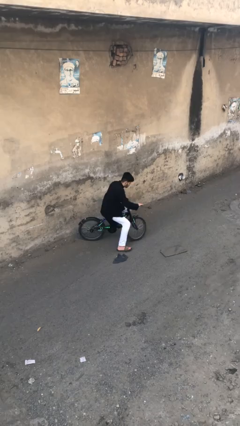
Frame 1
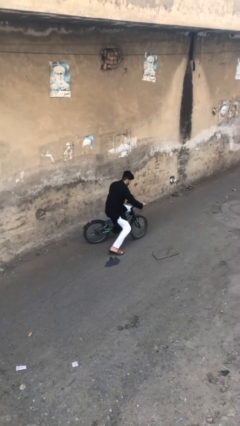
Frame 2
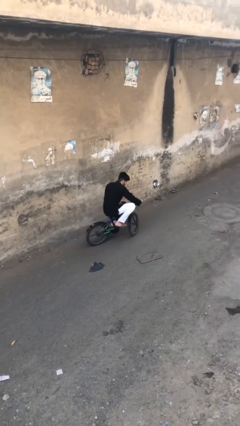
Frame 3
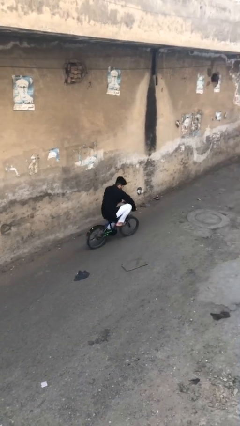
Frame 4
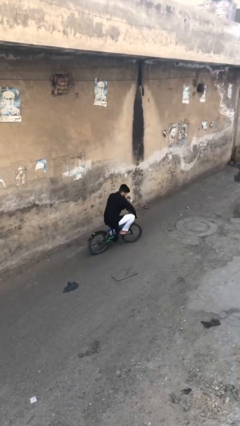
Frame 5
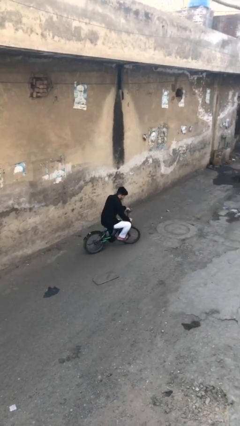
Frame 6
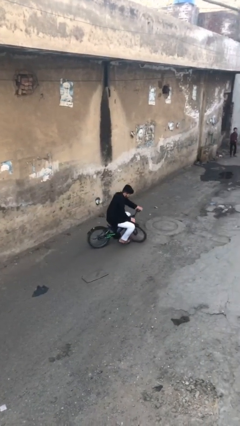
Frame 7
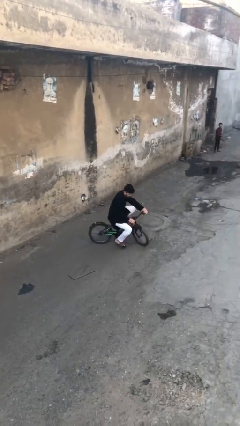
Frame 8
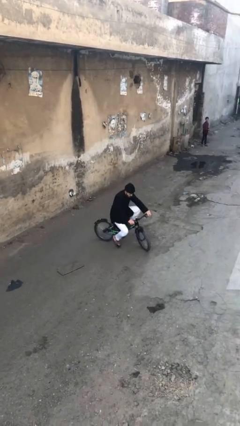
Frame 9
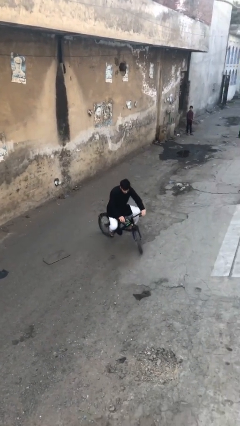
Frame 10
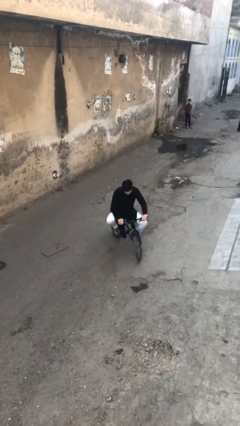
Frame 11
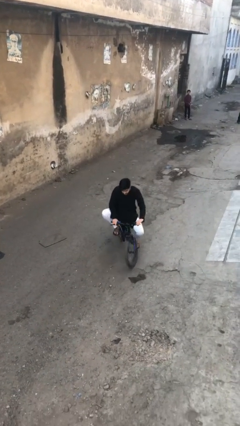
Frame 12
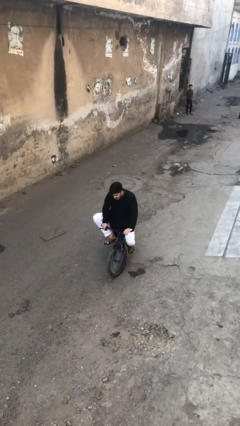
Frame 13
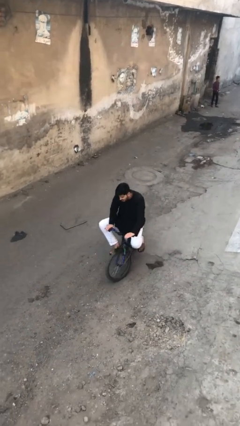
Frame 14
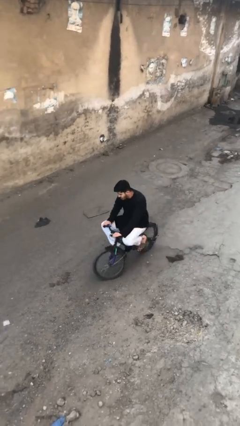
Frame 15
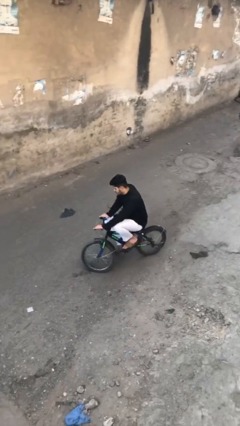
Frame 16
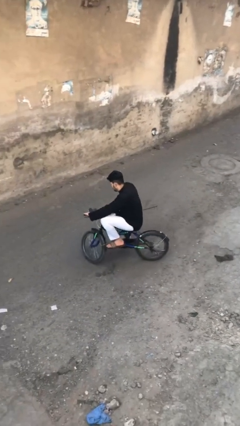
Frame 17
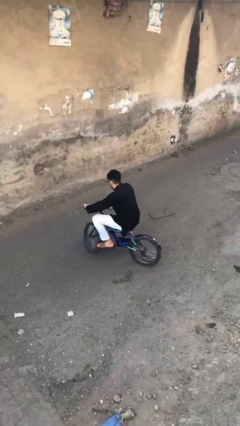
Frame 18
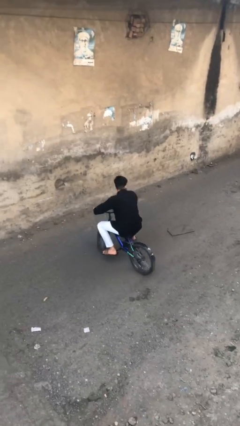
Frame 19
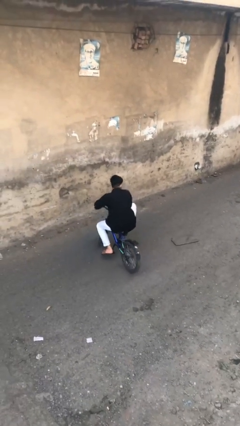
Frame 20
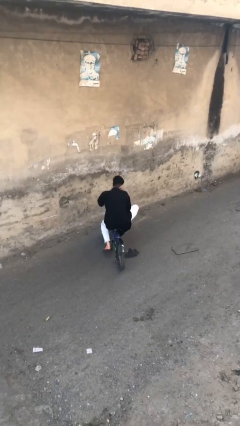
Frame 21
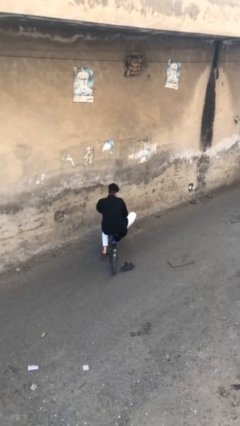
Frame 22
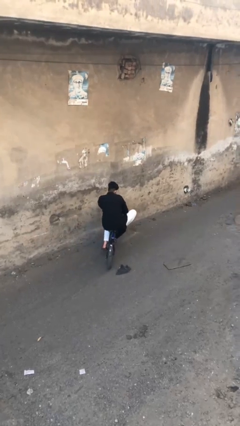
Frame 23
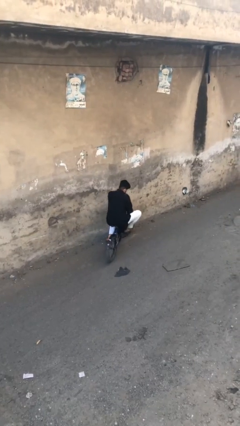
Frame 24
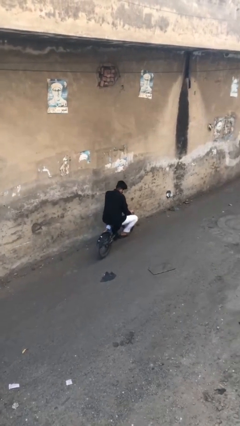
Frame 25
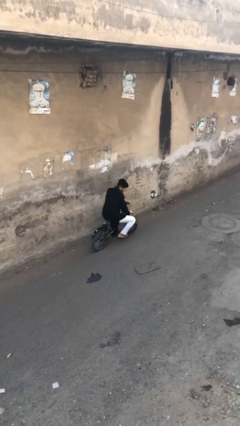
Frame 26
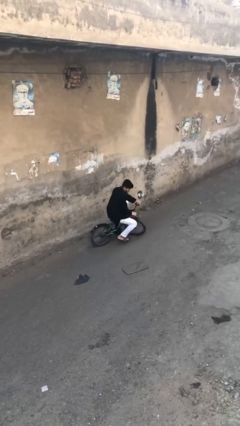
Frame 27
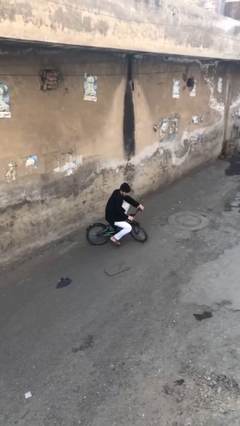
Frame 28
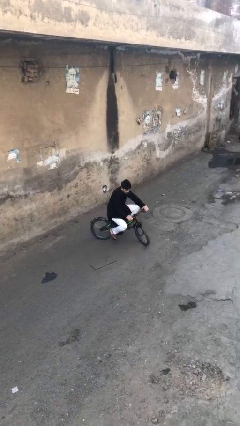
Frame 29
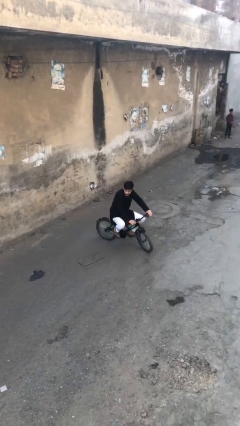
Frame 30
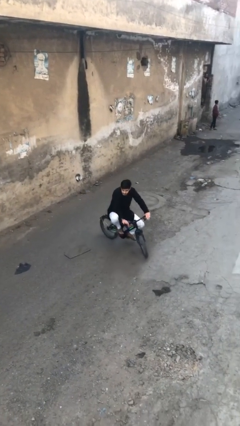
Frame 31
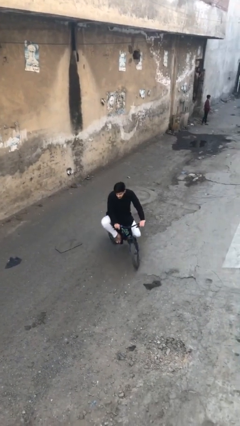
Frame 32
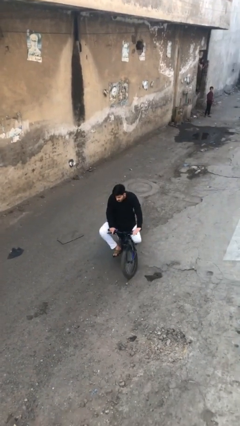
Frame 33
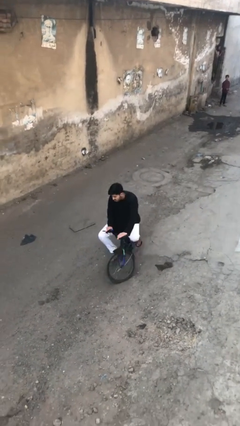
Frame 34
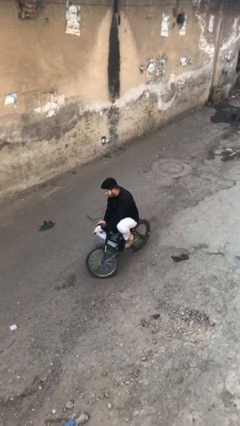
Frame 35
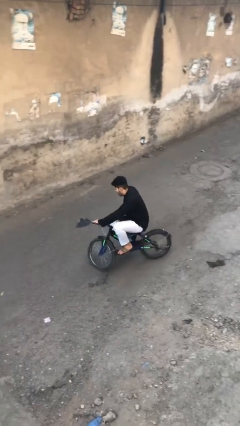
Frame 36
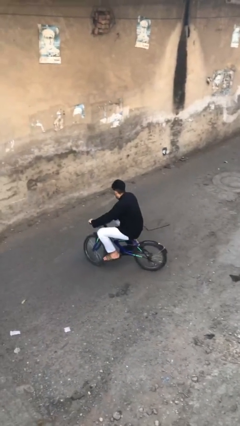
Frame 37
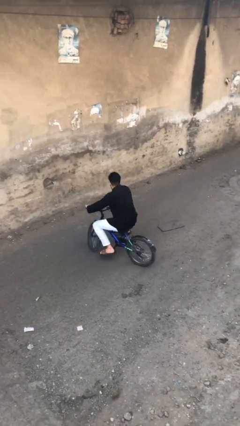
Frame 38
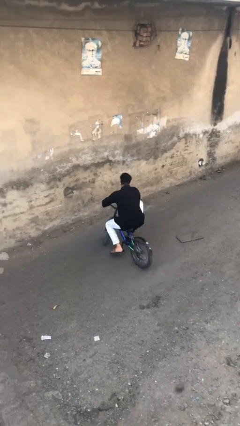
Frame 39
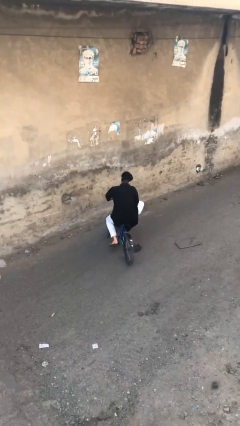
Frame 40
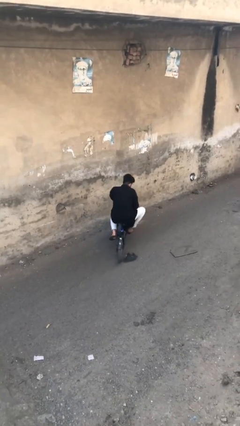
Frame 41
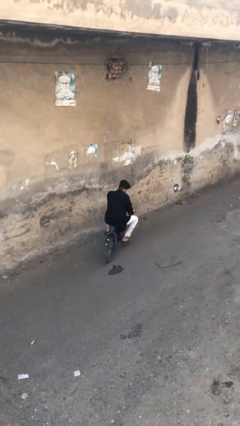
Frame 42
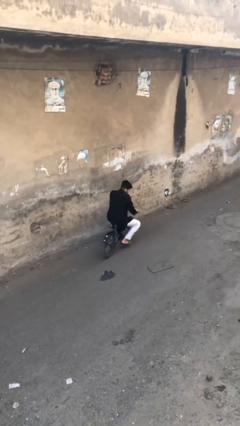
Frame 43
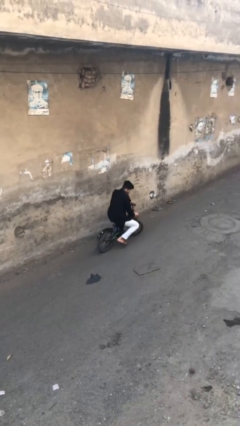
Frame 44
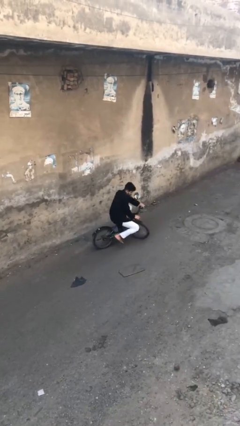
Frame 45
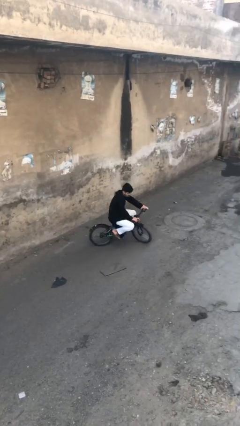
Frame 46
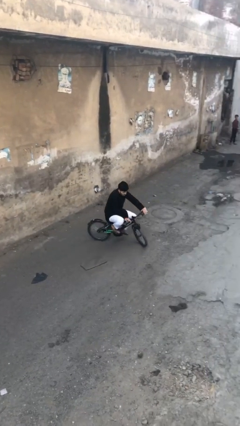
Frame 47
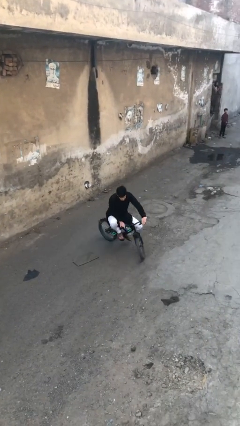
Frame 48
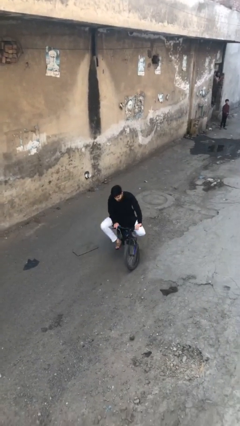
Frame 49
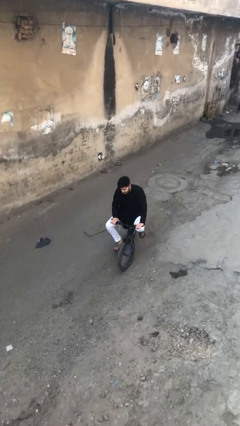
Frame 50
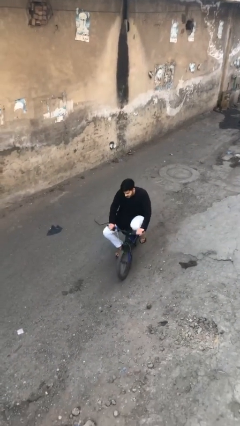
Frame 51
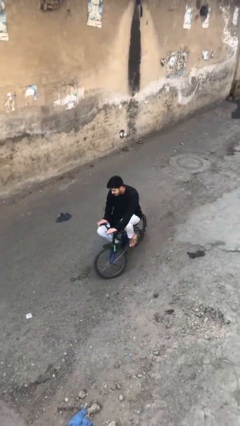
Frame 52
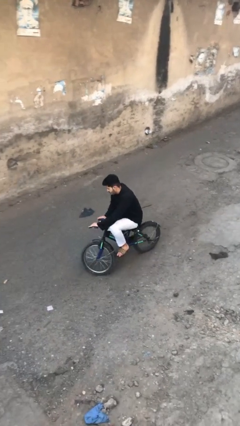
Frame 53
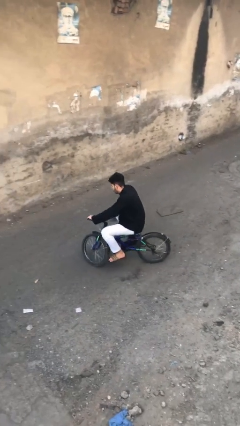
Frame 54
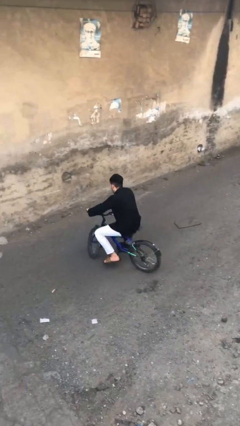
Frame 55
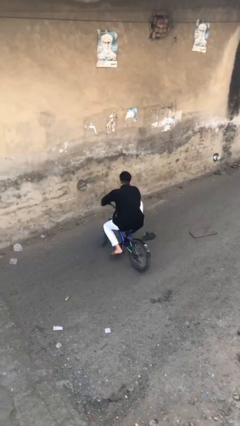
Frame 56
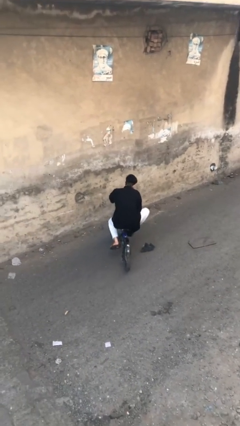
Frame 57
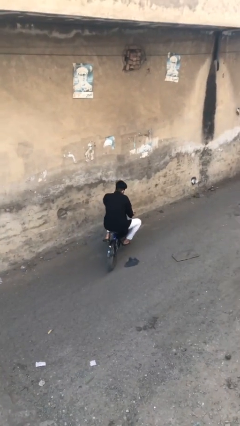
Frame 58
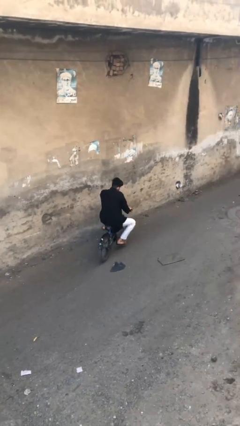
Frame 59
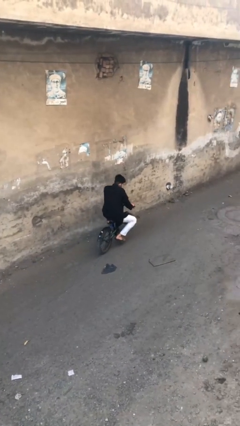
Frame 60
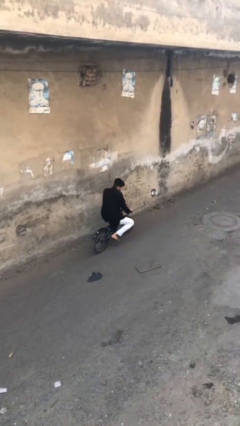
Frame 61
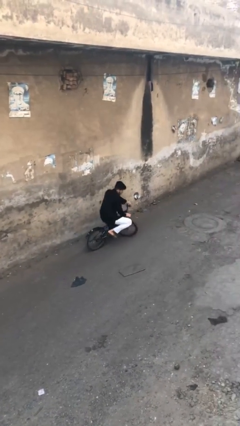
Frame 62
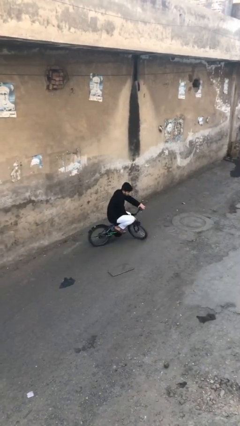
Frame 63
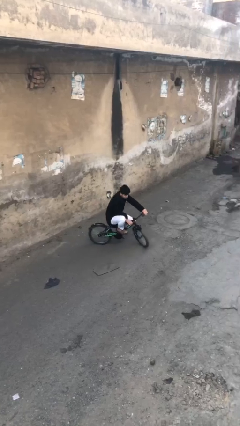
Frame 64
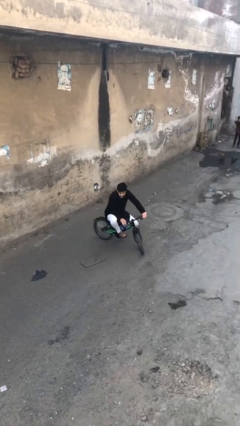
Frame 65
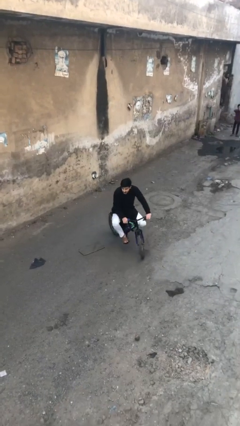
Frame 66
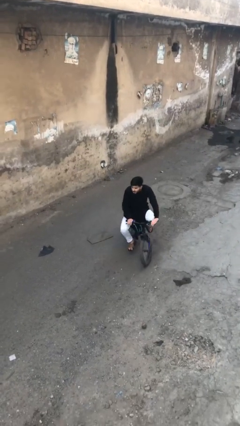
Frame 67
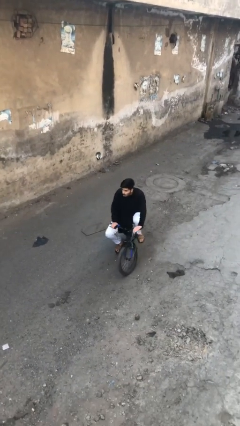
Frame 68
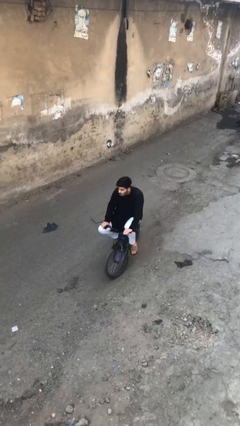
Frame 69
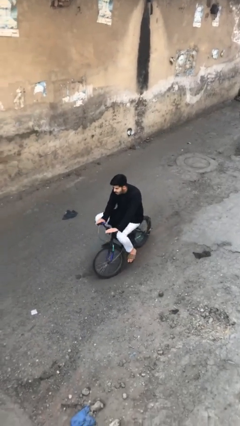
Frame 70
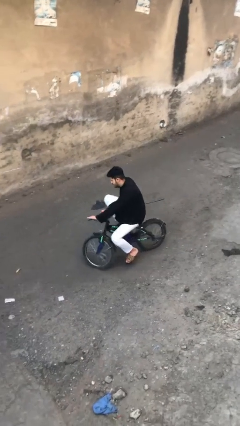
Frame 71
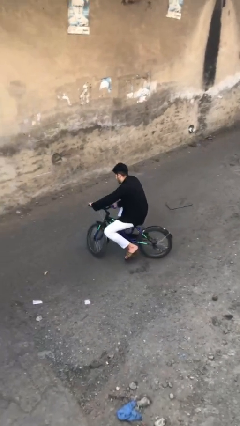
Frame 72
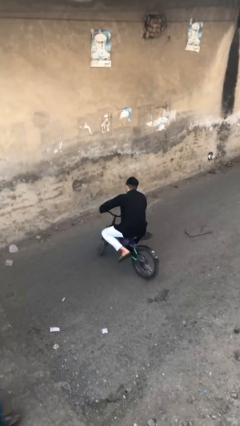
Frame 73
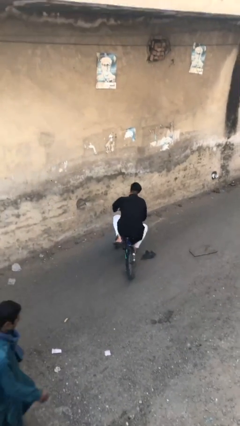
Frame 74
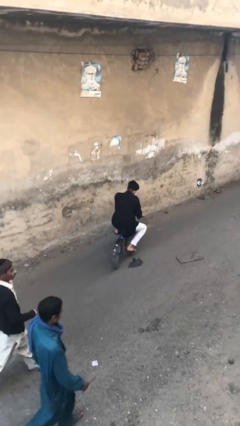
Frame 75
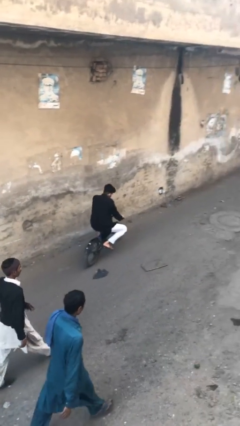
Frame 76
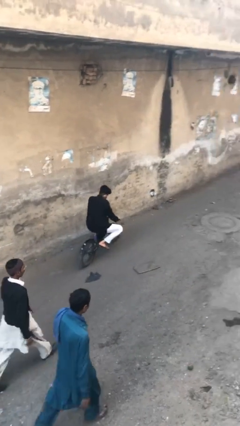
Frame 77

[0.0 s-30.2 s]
person rides bicycle

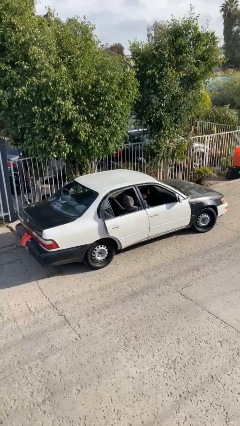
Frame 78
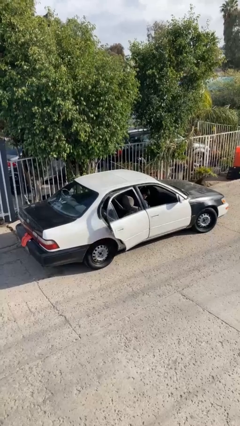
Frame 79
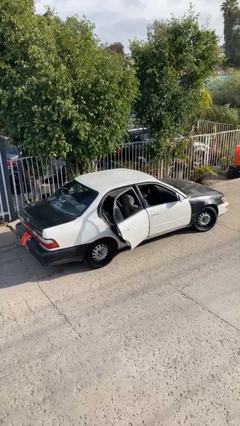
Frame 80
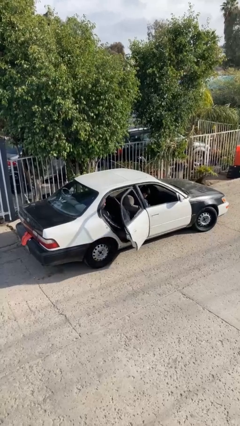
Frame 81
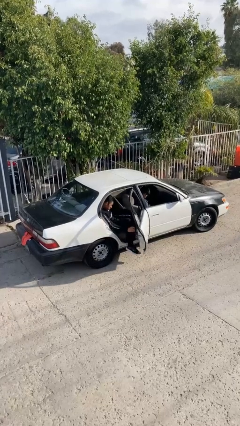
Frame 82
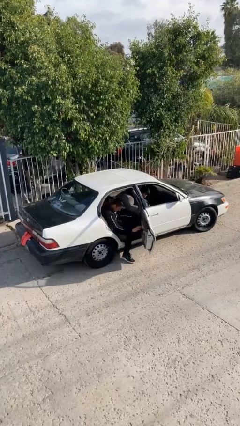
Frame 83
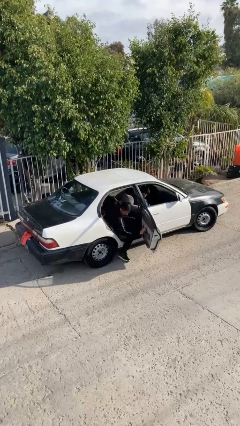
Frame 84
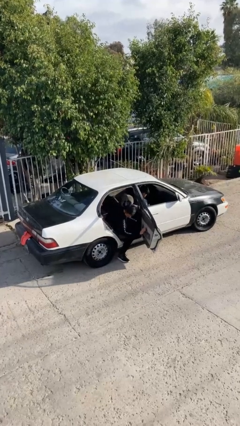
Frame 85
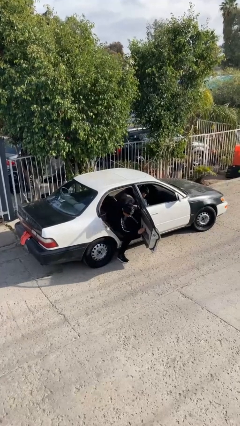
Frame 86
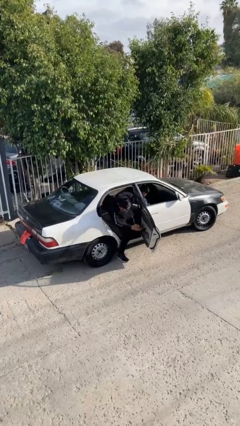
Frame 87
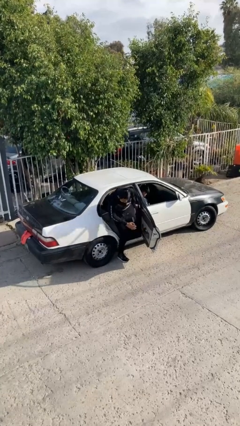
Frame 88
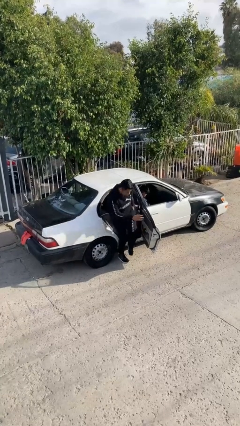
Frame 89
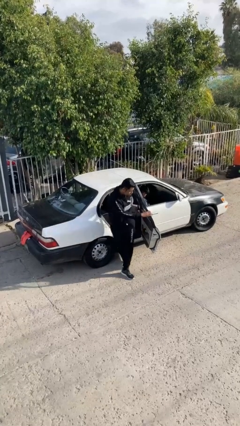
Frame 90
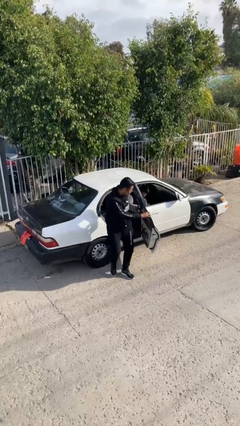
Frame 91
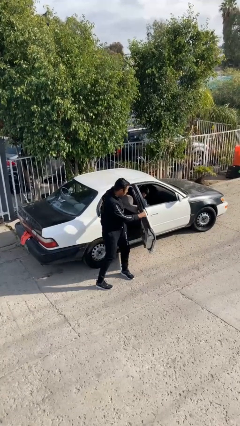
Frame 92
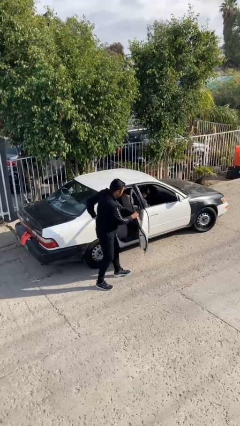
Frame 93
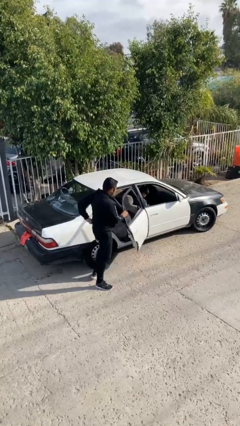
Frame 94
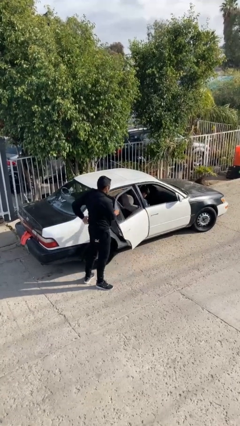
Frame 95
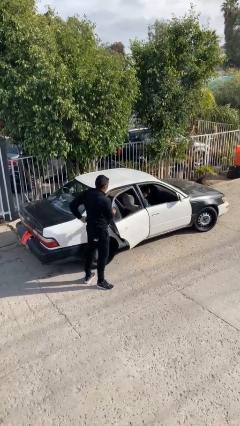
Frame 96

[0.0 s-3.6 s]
car drops off person
